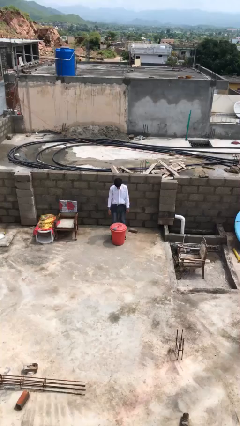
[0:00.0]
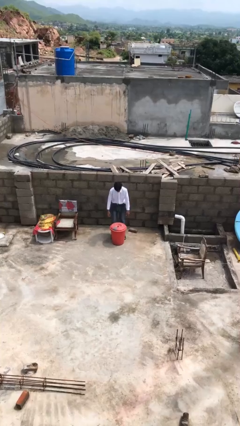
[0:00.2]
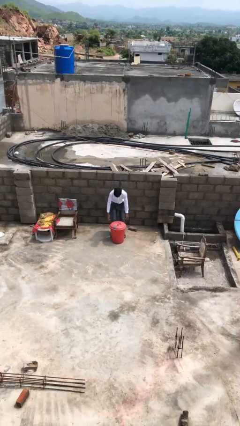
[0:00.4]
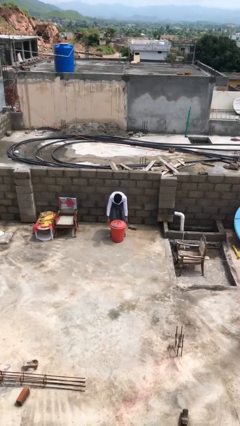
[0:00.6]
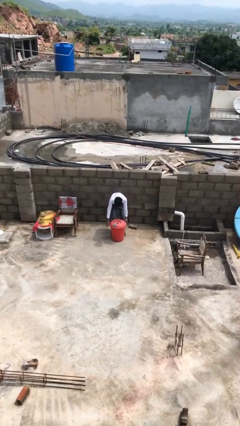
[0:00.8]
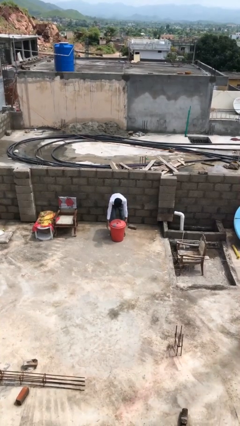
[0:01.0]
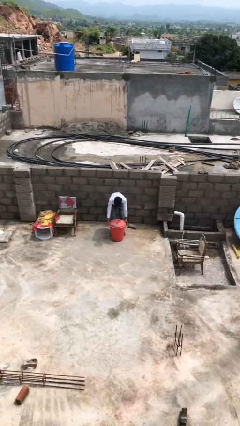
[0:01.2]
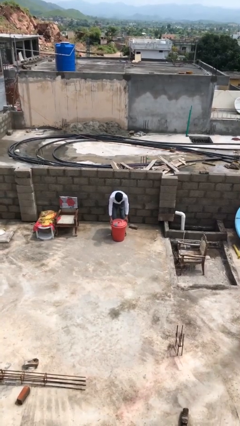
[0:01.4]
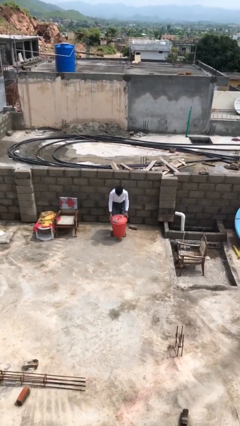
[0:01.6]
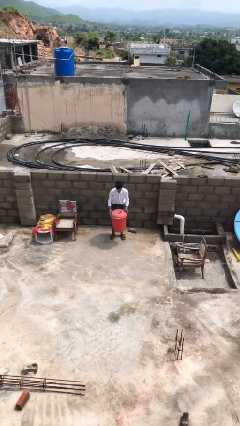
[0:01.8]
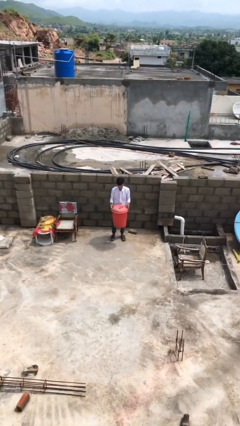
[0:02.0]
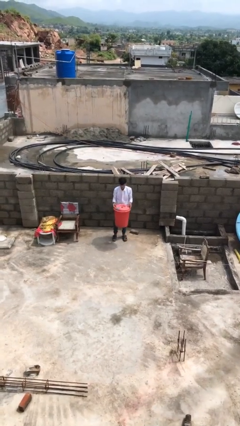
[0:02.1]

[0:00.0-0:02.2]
person picks up object from floor

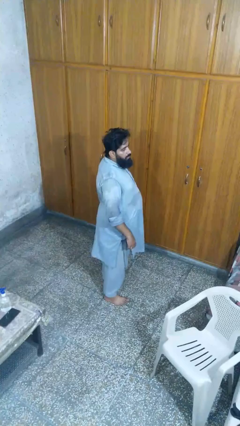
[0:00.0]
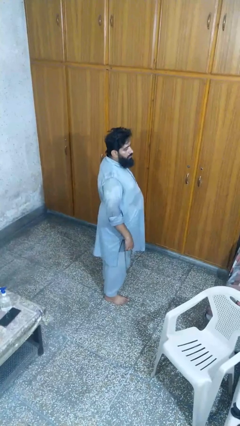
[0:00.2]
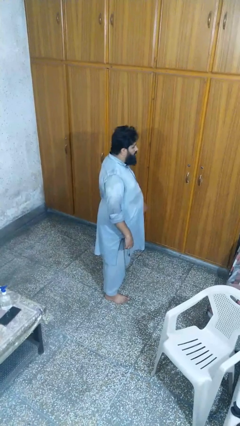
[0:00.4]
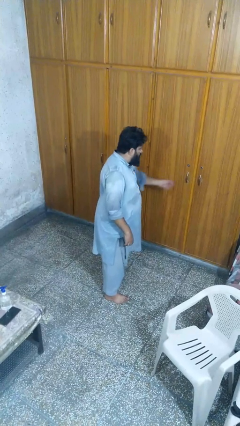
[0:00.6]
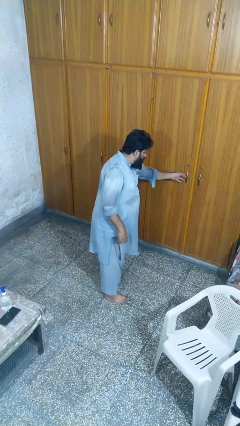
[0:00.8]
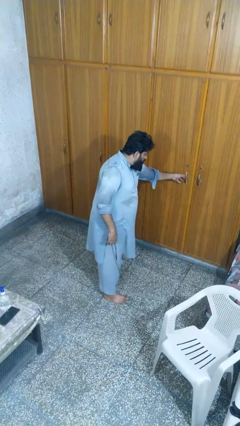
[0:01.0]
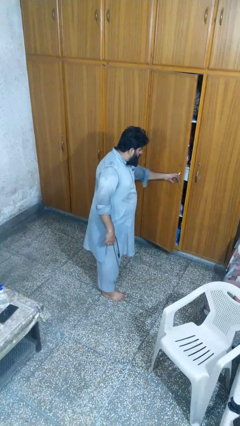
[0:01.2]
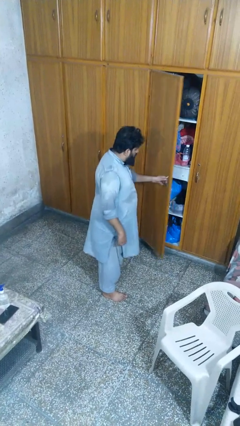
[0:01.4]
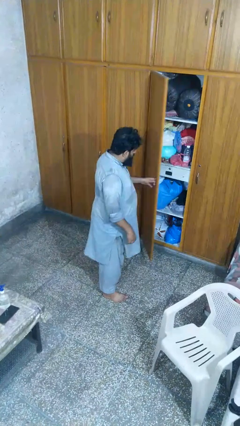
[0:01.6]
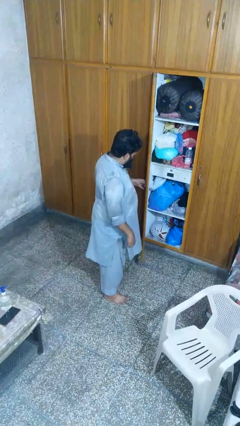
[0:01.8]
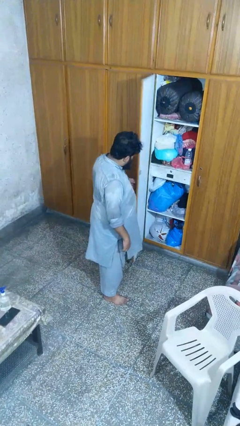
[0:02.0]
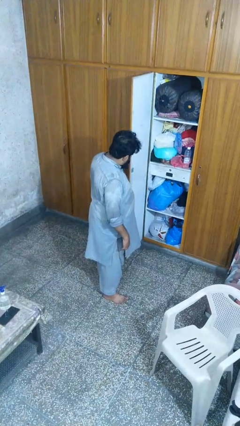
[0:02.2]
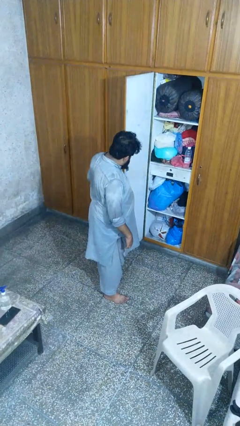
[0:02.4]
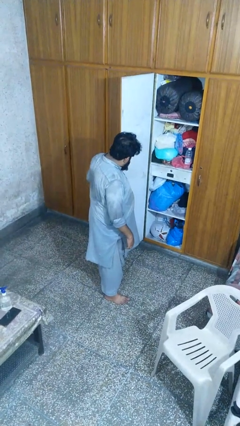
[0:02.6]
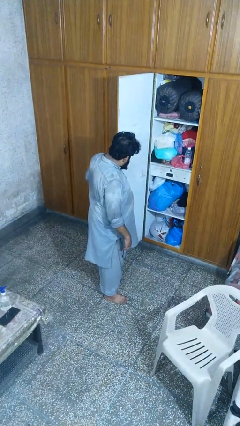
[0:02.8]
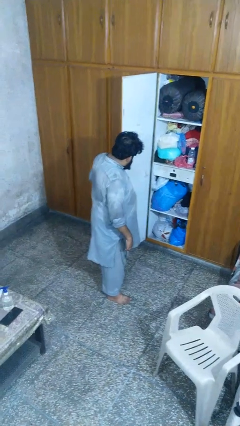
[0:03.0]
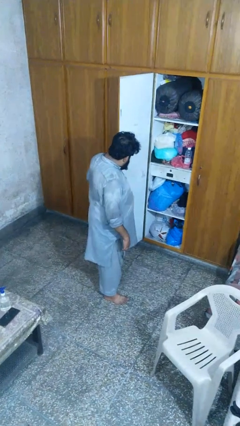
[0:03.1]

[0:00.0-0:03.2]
person opens closet door

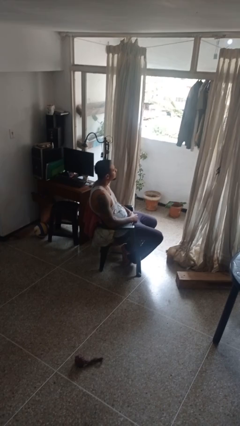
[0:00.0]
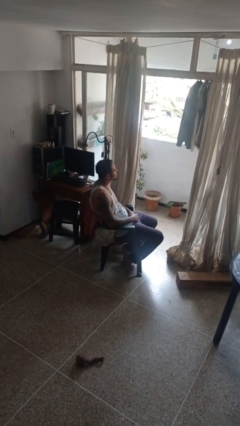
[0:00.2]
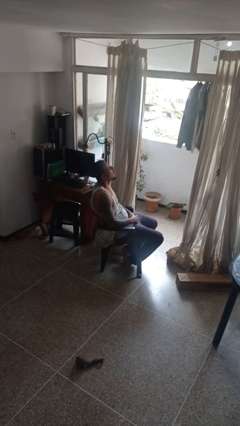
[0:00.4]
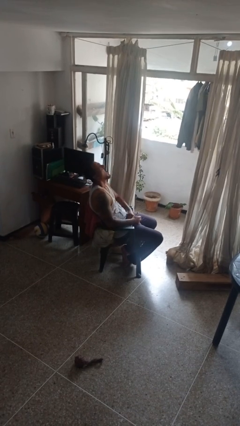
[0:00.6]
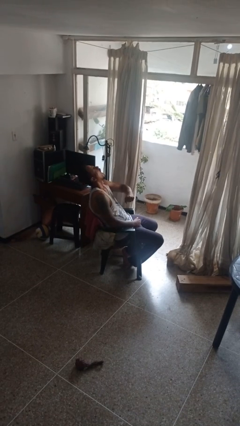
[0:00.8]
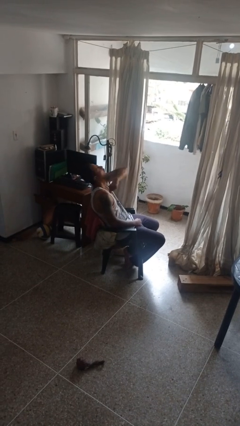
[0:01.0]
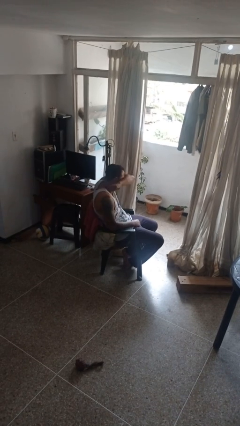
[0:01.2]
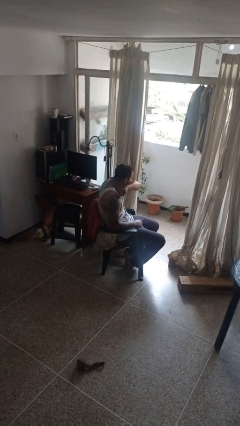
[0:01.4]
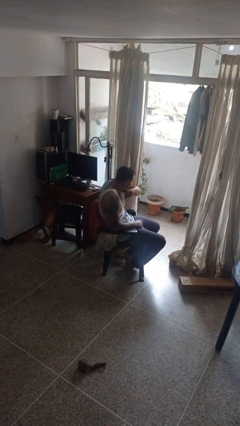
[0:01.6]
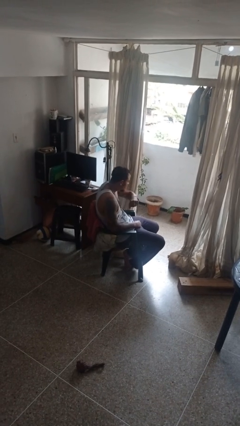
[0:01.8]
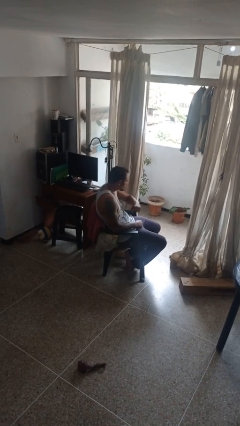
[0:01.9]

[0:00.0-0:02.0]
person sneezes into arm

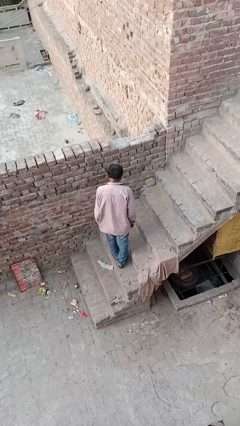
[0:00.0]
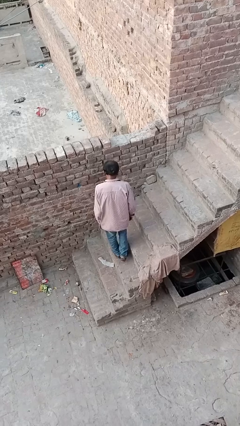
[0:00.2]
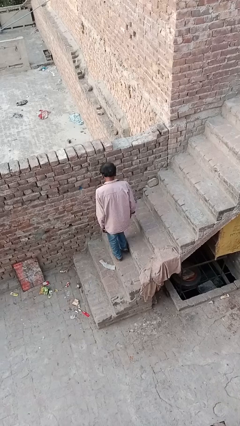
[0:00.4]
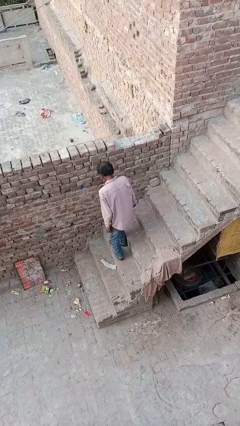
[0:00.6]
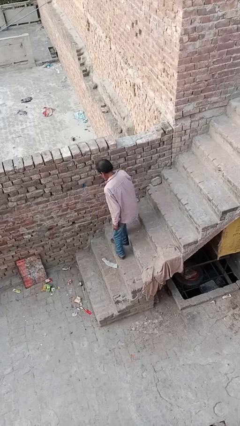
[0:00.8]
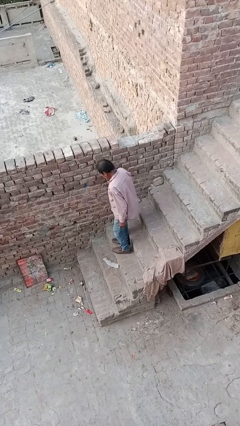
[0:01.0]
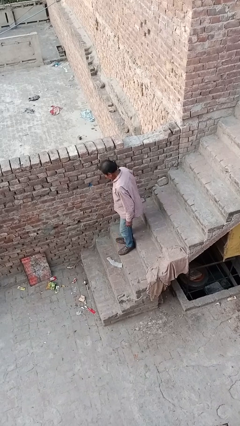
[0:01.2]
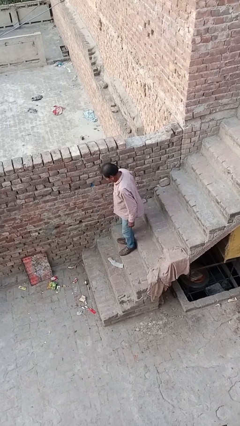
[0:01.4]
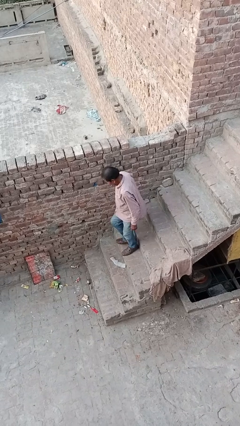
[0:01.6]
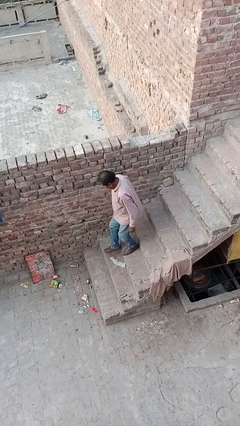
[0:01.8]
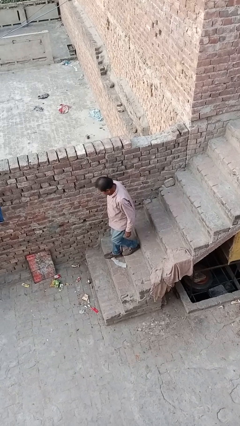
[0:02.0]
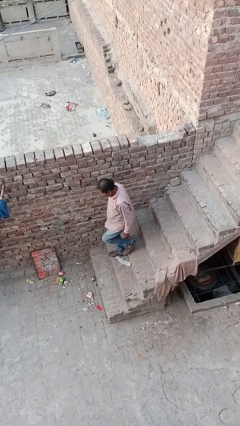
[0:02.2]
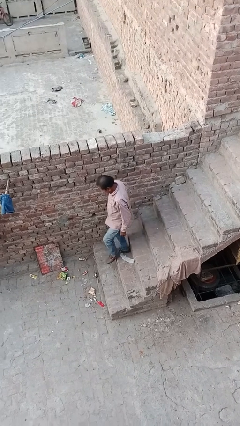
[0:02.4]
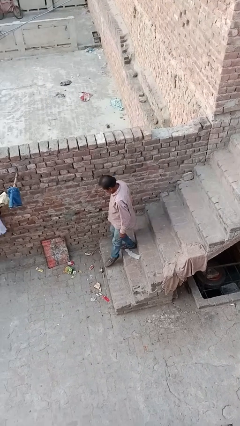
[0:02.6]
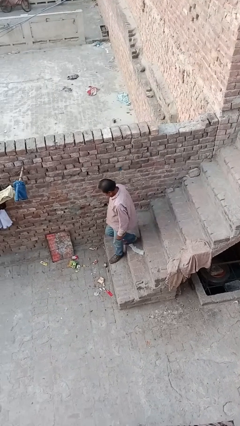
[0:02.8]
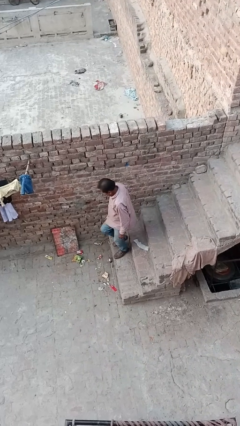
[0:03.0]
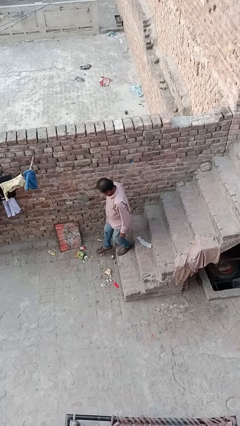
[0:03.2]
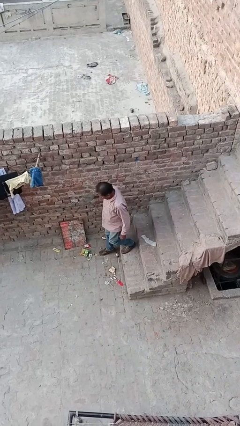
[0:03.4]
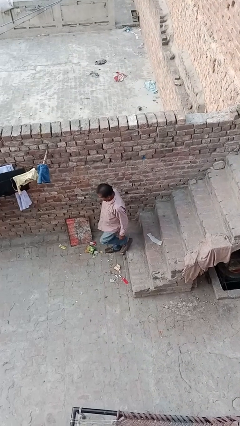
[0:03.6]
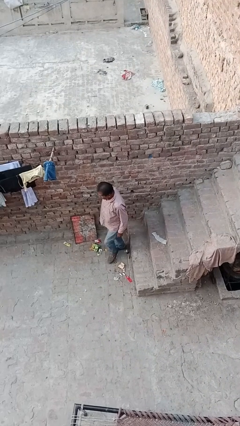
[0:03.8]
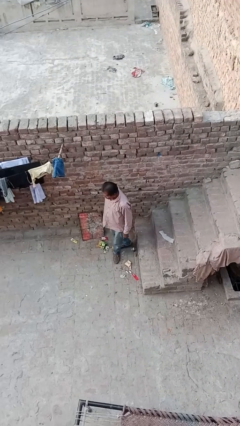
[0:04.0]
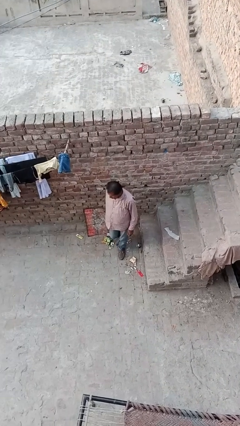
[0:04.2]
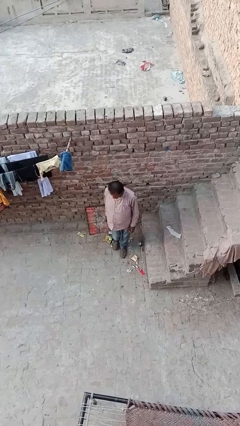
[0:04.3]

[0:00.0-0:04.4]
person climbs down stairs

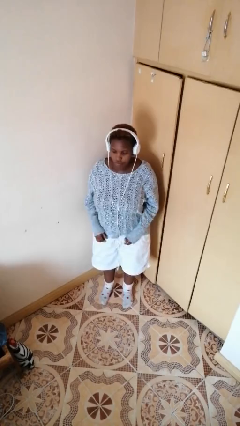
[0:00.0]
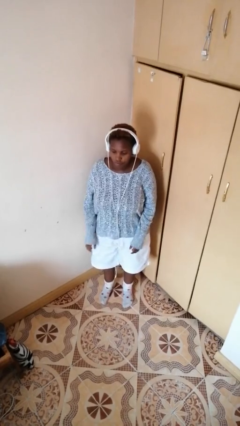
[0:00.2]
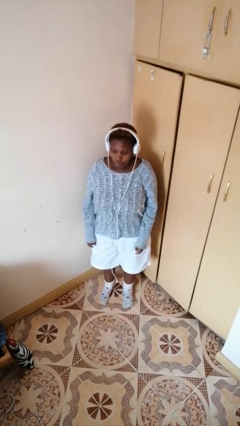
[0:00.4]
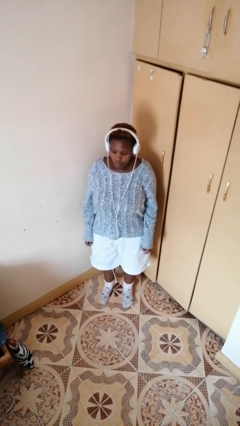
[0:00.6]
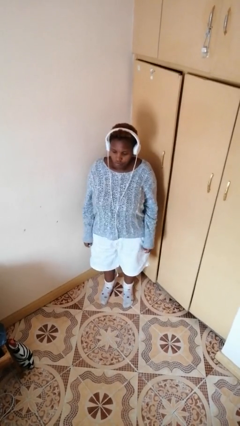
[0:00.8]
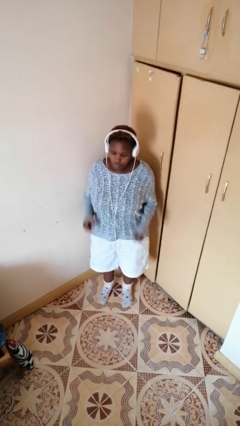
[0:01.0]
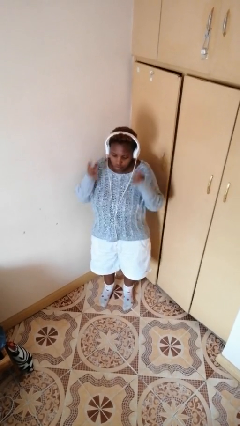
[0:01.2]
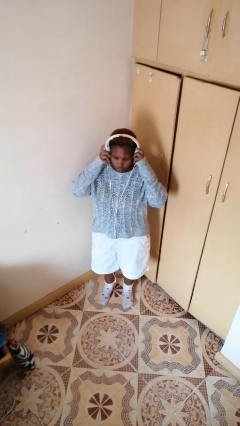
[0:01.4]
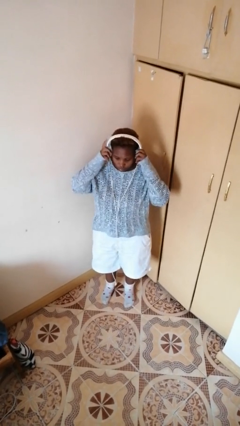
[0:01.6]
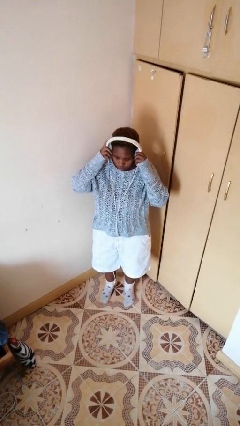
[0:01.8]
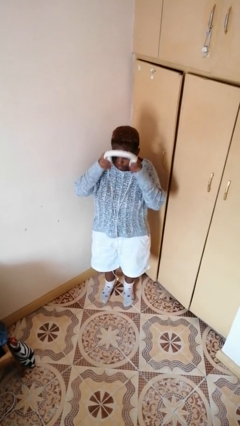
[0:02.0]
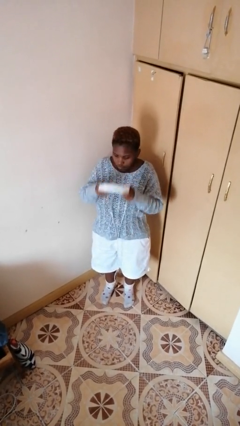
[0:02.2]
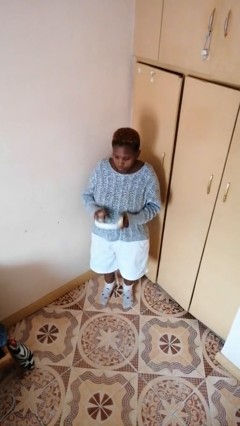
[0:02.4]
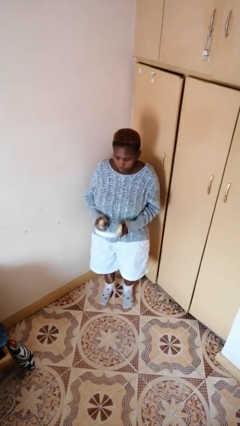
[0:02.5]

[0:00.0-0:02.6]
person takes off headphones

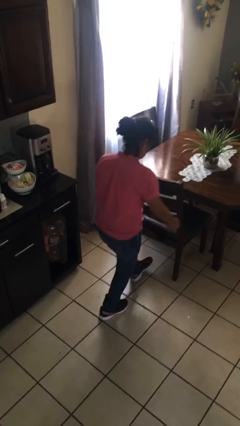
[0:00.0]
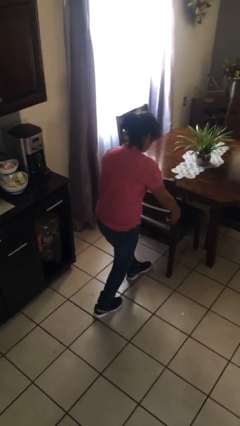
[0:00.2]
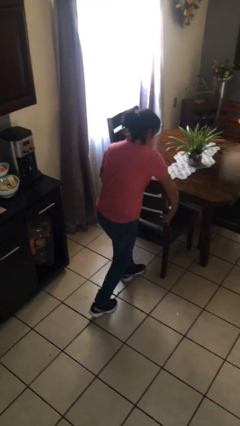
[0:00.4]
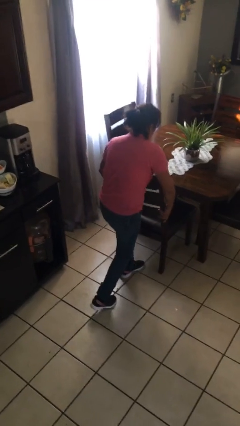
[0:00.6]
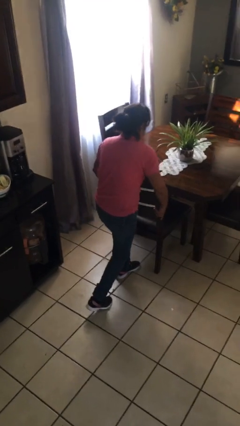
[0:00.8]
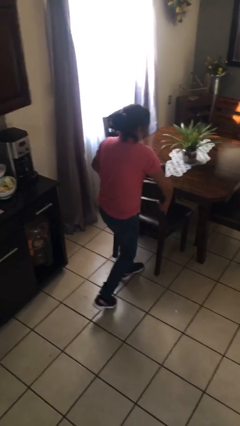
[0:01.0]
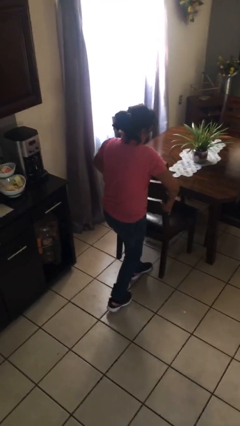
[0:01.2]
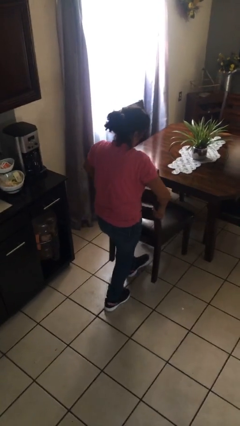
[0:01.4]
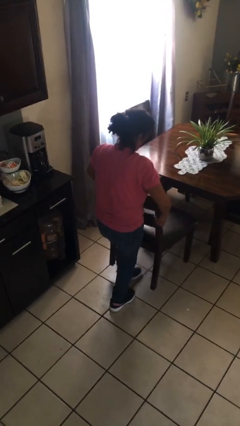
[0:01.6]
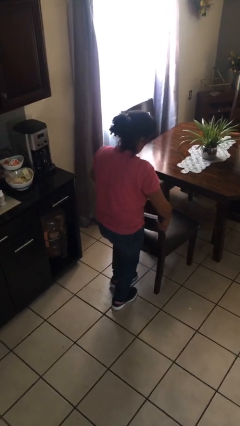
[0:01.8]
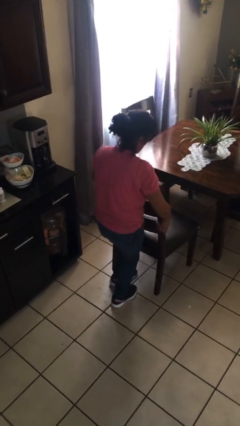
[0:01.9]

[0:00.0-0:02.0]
person pulls out chair

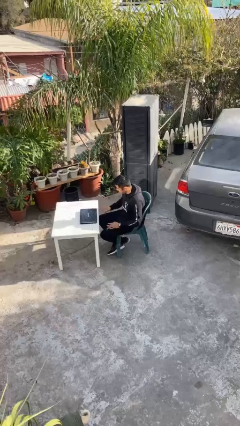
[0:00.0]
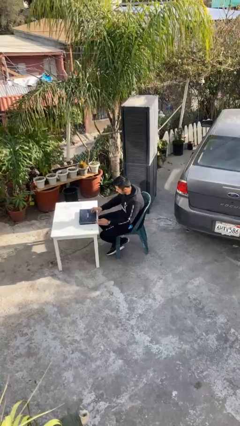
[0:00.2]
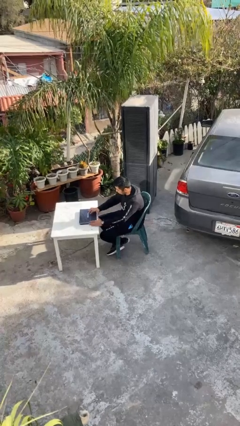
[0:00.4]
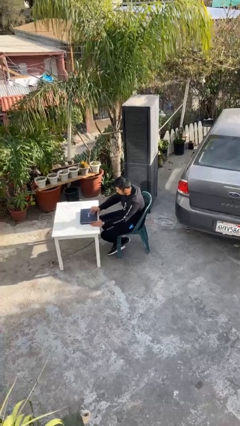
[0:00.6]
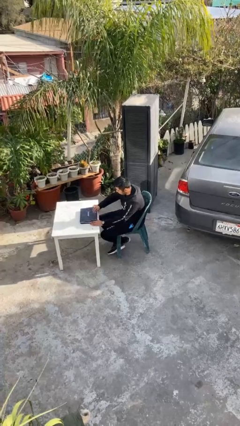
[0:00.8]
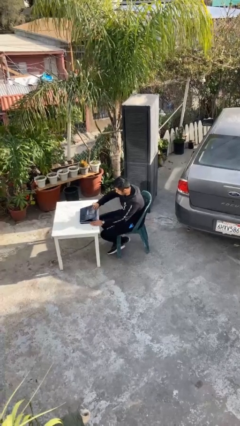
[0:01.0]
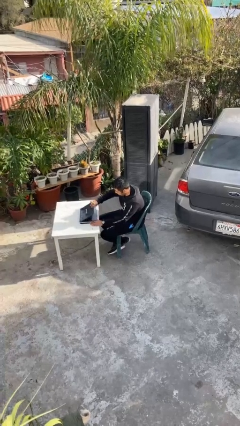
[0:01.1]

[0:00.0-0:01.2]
person interacts with laptop
